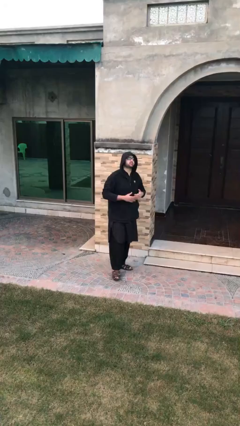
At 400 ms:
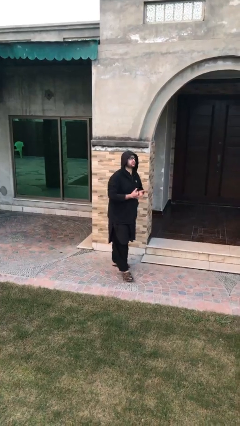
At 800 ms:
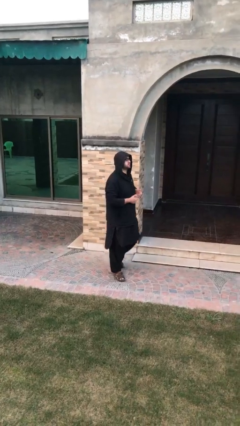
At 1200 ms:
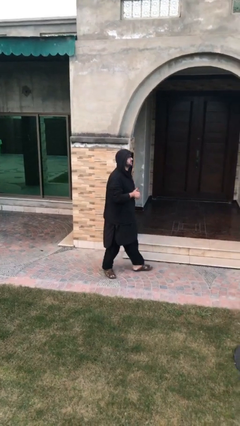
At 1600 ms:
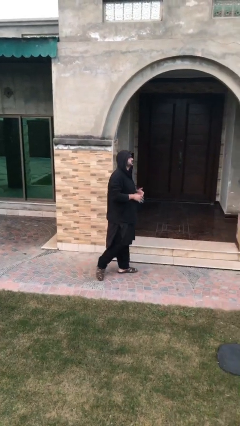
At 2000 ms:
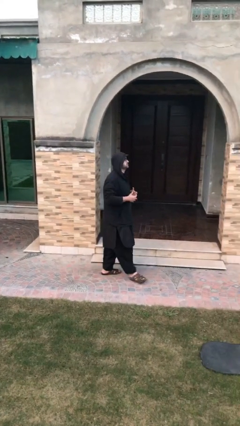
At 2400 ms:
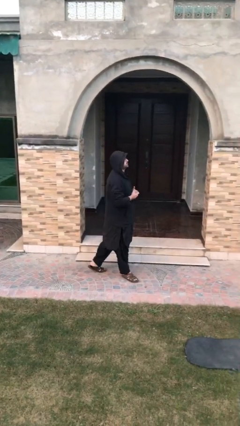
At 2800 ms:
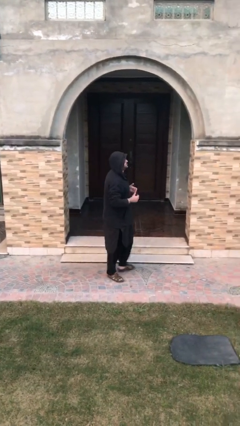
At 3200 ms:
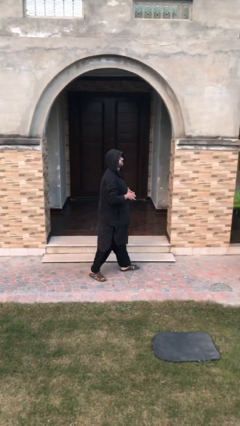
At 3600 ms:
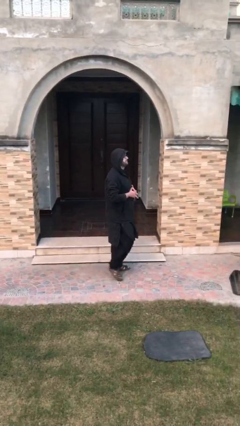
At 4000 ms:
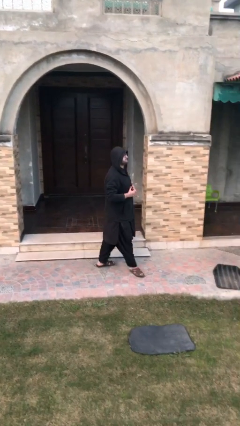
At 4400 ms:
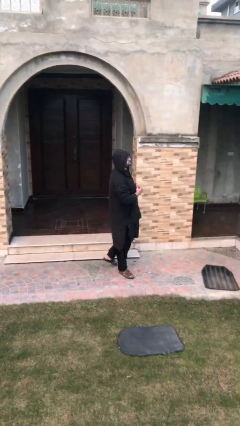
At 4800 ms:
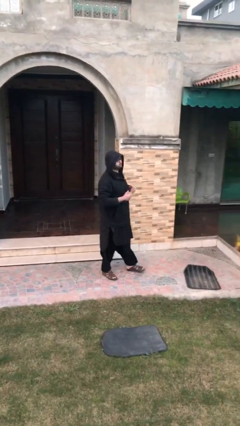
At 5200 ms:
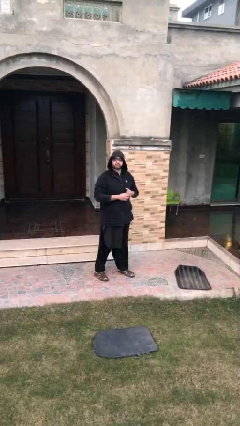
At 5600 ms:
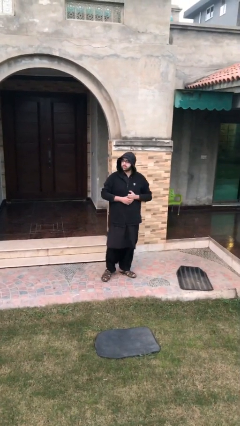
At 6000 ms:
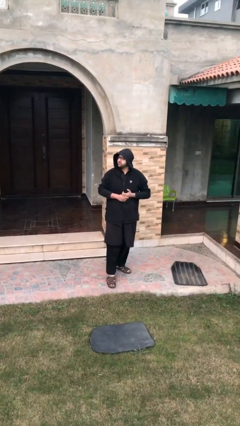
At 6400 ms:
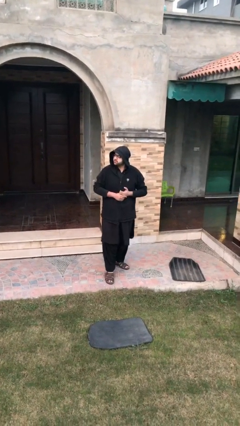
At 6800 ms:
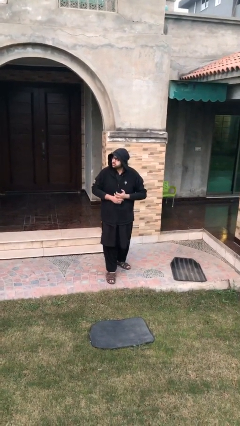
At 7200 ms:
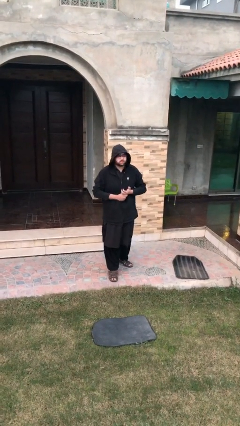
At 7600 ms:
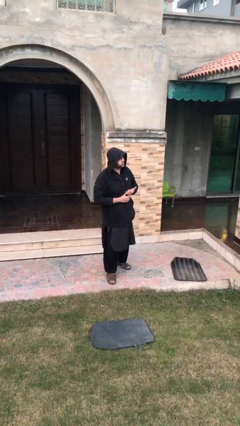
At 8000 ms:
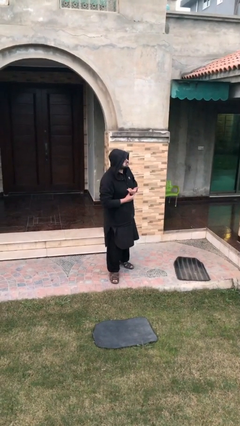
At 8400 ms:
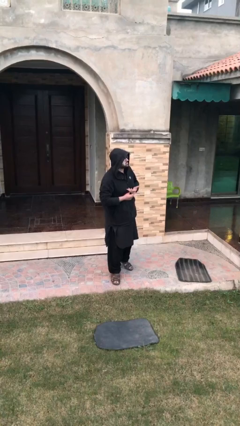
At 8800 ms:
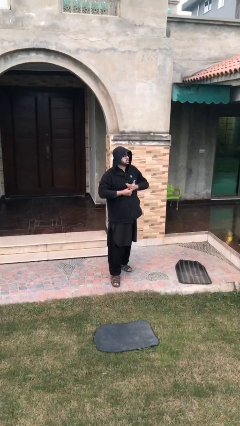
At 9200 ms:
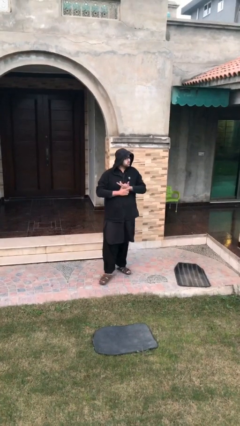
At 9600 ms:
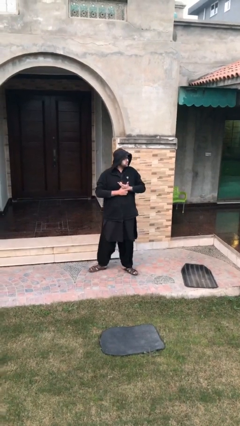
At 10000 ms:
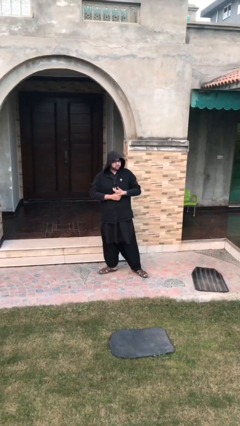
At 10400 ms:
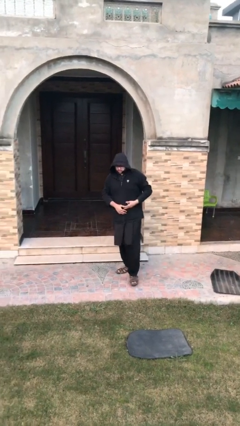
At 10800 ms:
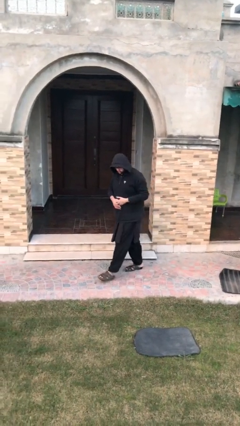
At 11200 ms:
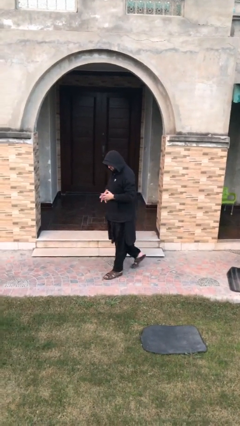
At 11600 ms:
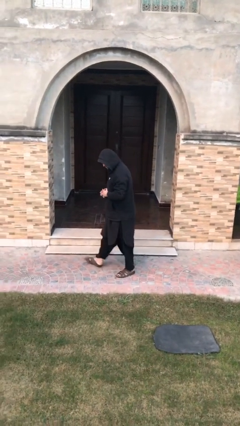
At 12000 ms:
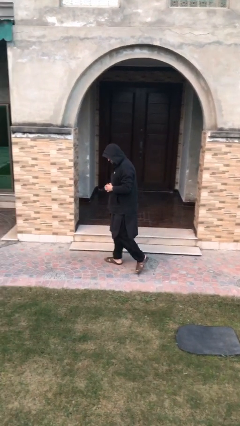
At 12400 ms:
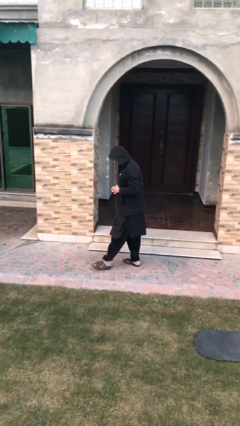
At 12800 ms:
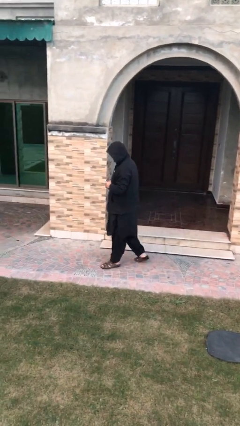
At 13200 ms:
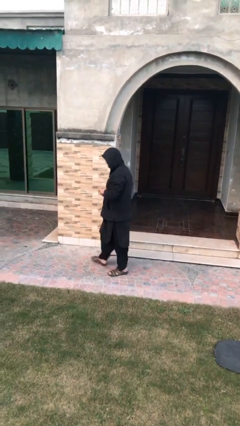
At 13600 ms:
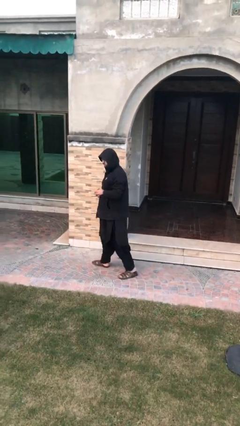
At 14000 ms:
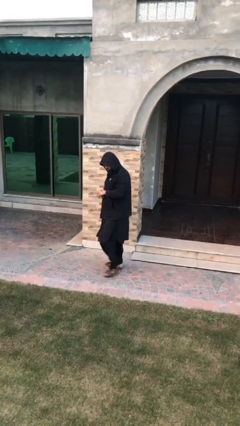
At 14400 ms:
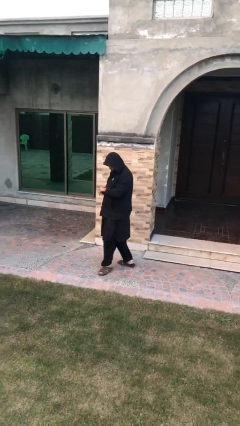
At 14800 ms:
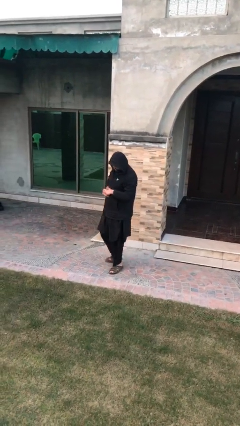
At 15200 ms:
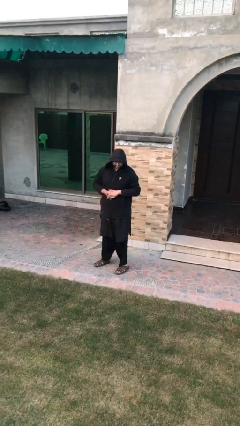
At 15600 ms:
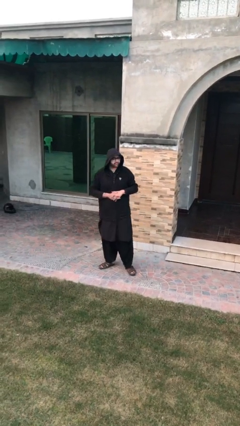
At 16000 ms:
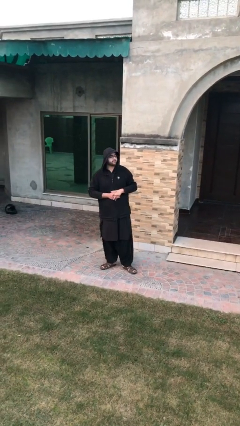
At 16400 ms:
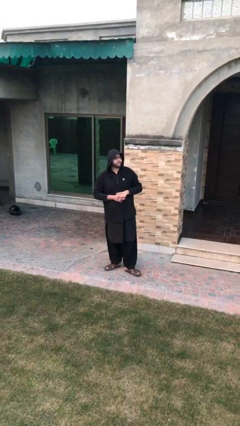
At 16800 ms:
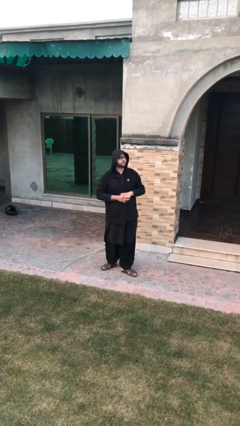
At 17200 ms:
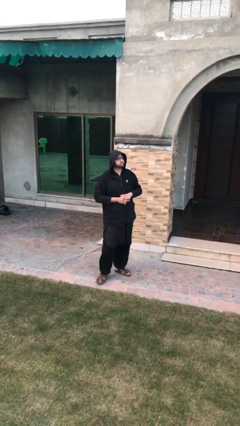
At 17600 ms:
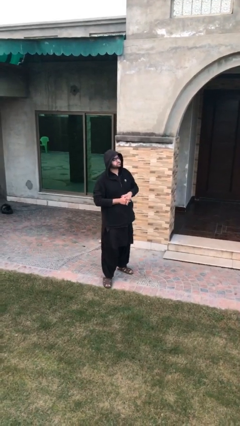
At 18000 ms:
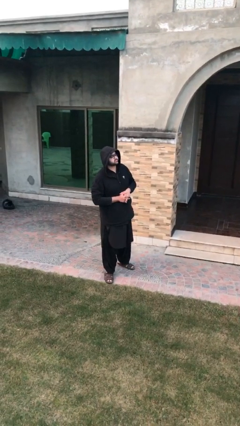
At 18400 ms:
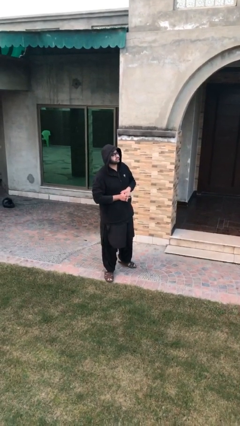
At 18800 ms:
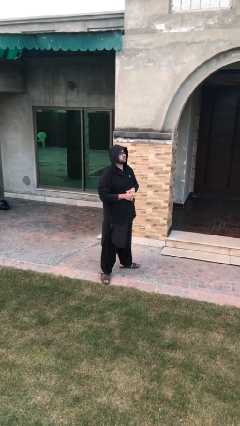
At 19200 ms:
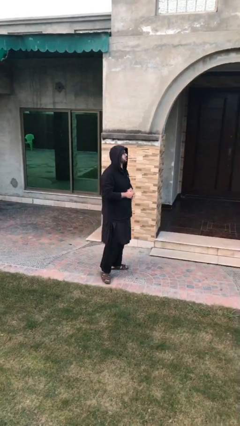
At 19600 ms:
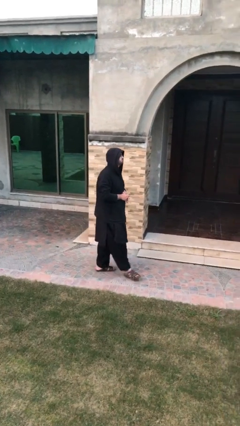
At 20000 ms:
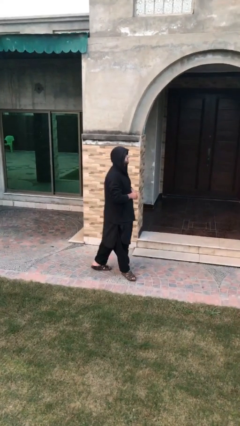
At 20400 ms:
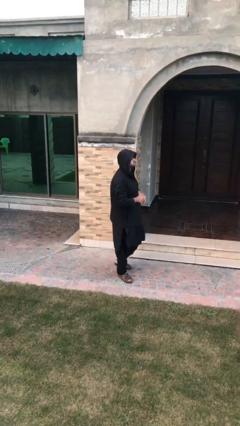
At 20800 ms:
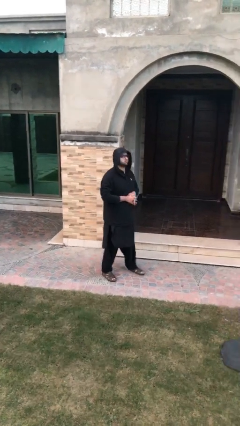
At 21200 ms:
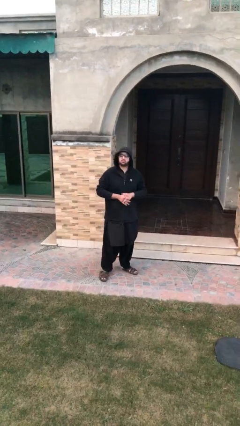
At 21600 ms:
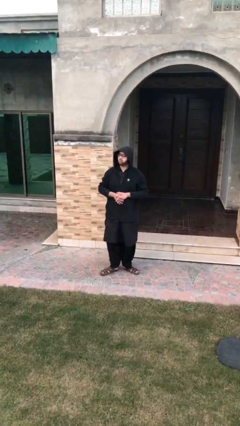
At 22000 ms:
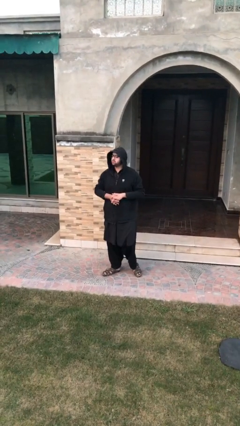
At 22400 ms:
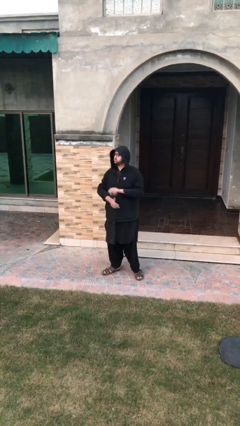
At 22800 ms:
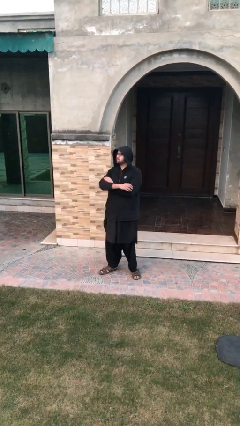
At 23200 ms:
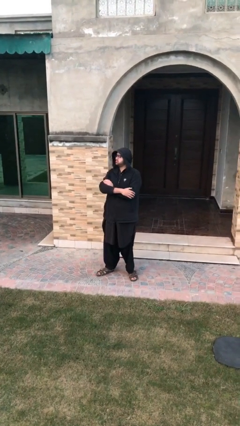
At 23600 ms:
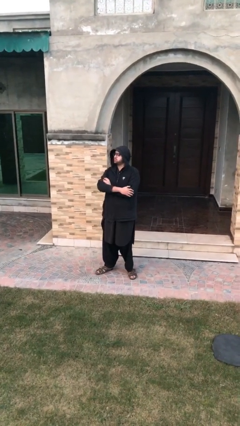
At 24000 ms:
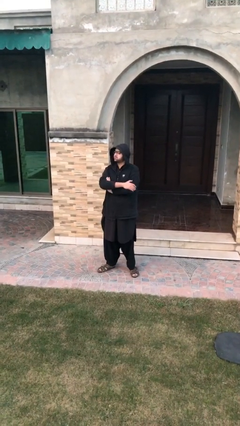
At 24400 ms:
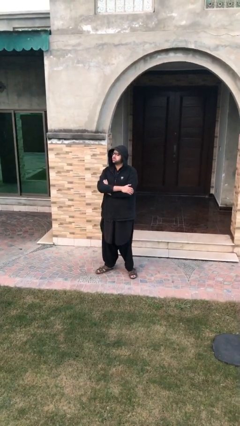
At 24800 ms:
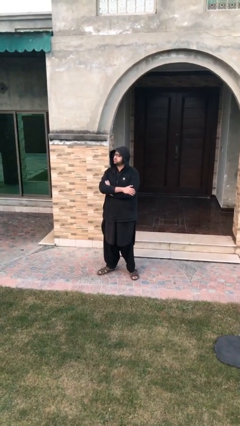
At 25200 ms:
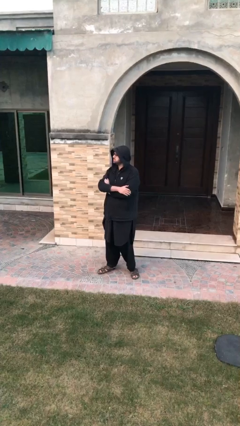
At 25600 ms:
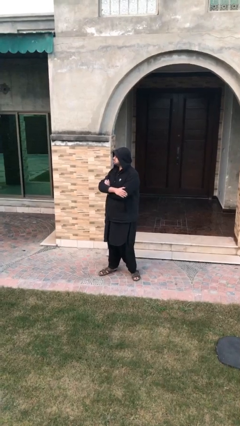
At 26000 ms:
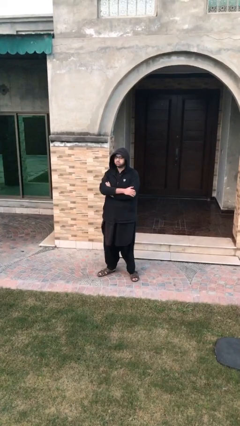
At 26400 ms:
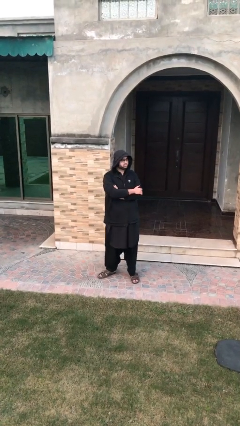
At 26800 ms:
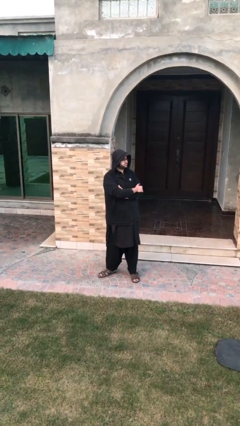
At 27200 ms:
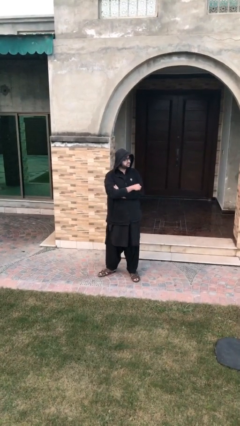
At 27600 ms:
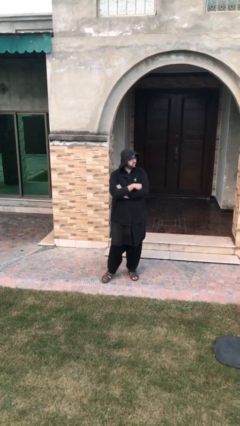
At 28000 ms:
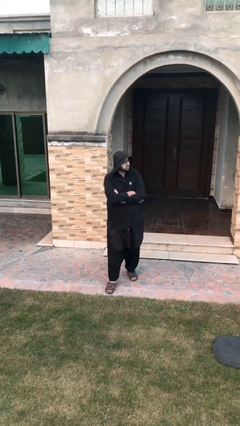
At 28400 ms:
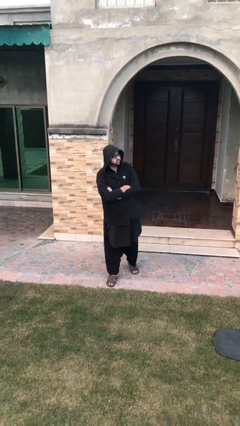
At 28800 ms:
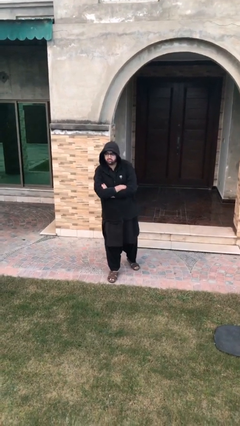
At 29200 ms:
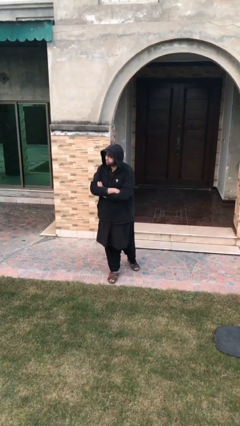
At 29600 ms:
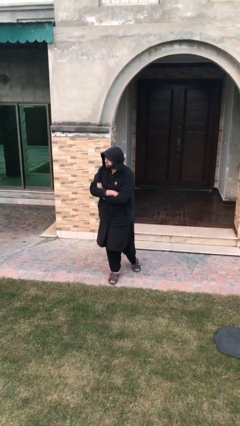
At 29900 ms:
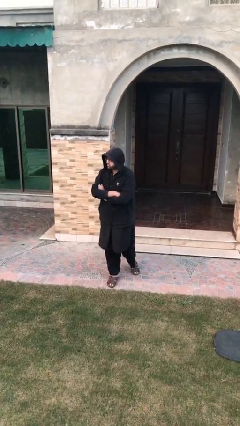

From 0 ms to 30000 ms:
person walks

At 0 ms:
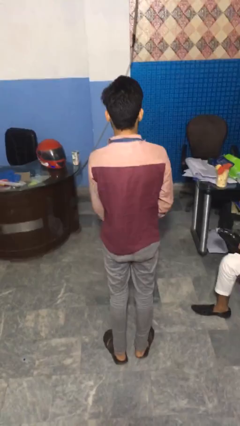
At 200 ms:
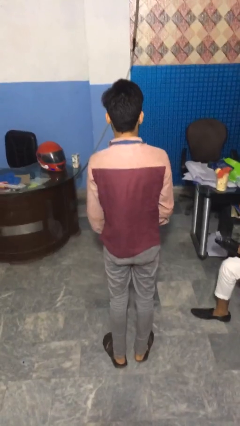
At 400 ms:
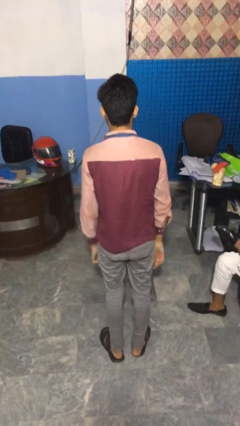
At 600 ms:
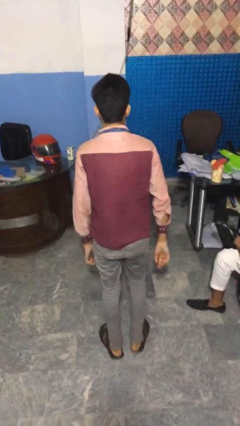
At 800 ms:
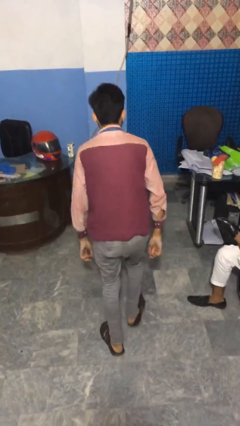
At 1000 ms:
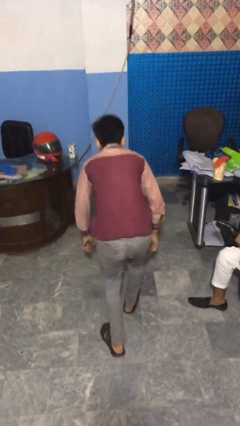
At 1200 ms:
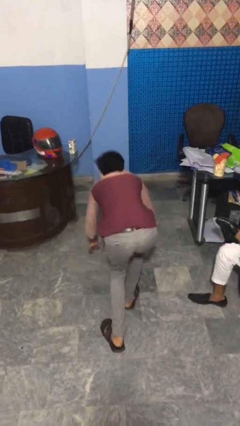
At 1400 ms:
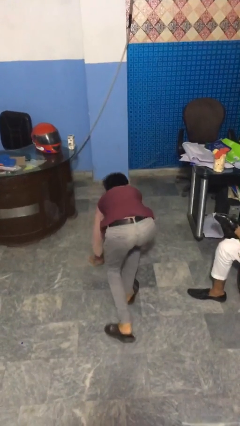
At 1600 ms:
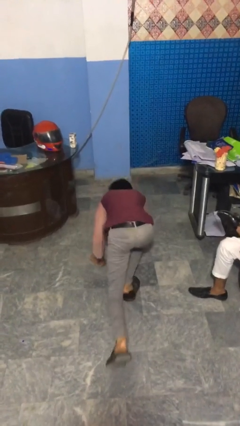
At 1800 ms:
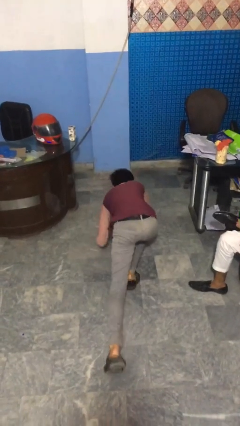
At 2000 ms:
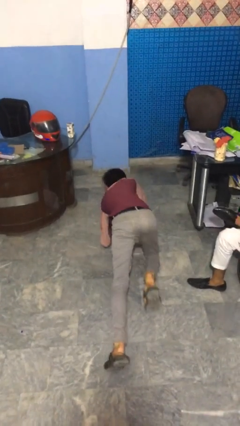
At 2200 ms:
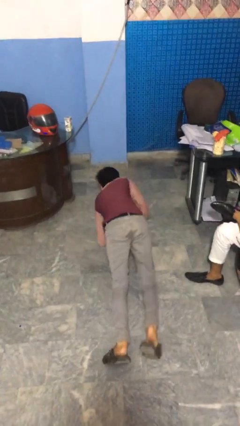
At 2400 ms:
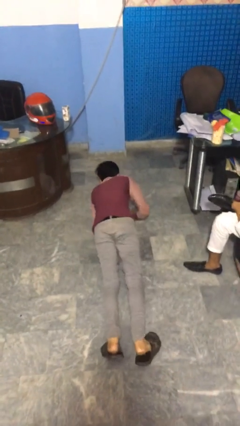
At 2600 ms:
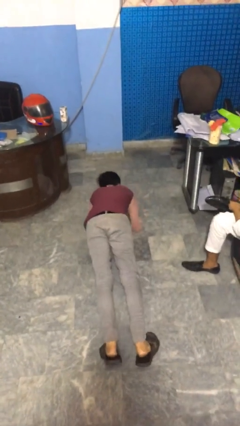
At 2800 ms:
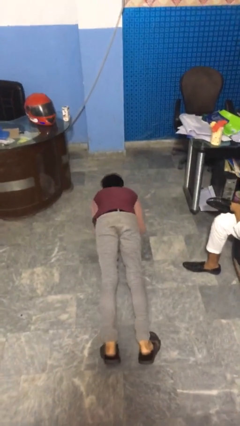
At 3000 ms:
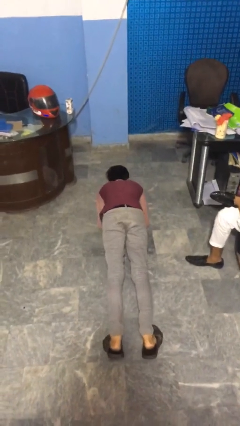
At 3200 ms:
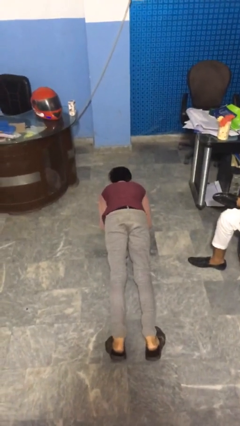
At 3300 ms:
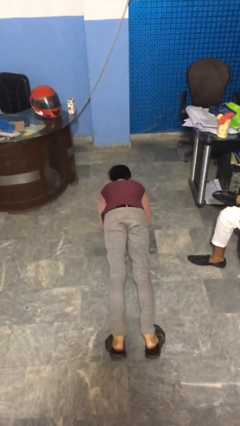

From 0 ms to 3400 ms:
person exercises with plank
